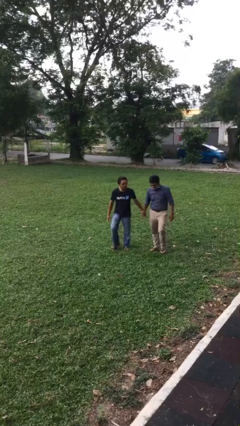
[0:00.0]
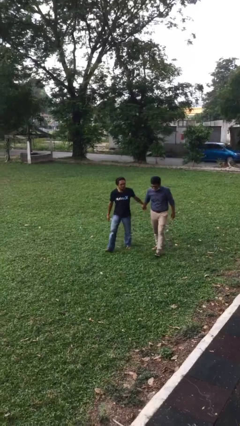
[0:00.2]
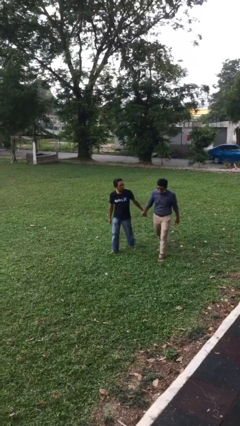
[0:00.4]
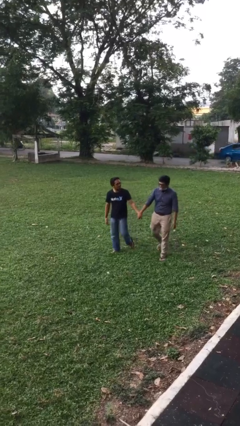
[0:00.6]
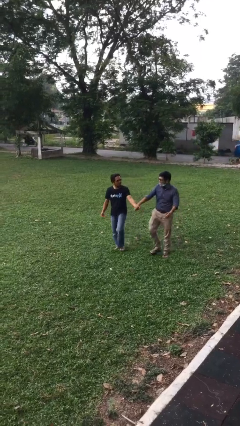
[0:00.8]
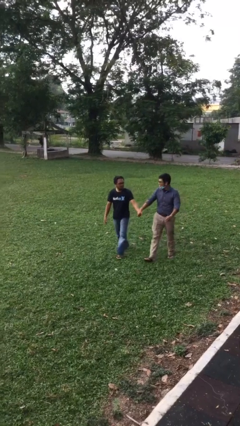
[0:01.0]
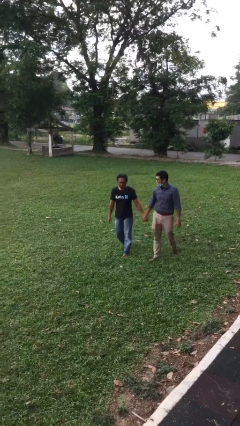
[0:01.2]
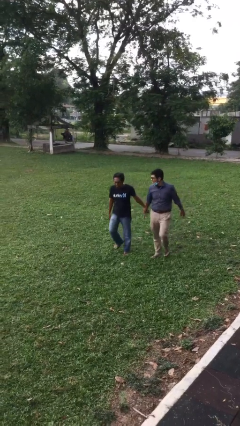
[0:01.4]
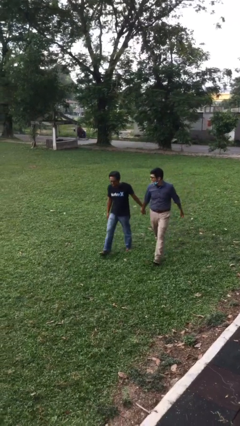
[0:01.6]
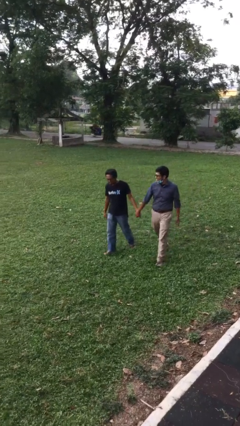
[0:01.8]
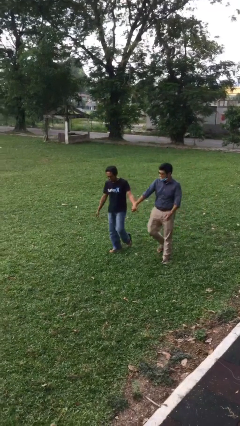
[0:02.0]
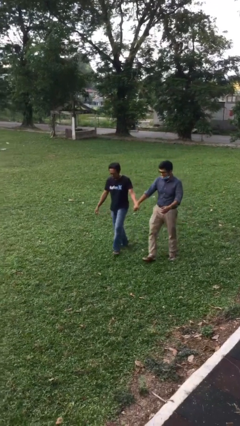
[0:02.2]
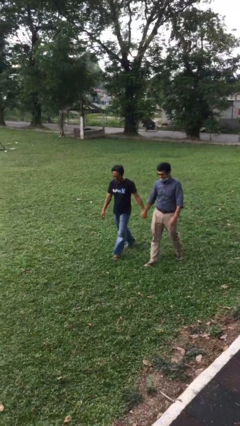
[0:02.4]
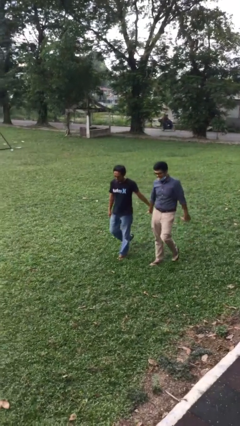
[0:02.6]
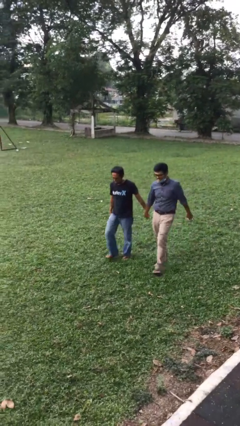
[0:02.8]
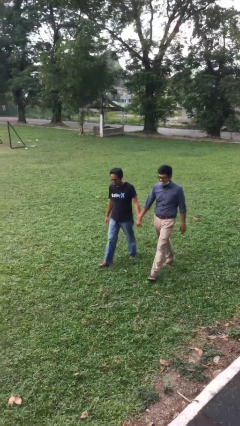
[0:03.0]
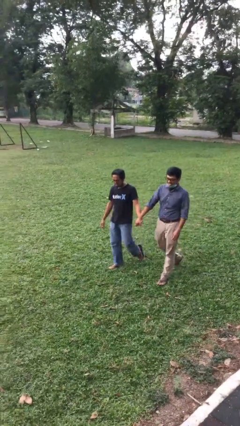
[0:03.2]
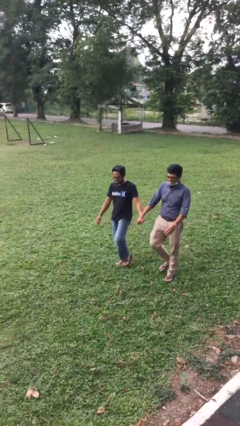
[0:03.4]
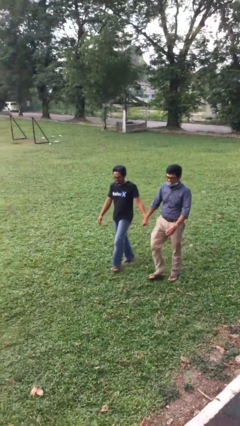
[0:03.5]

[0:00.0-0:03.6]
person holds hand

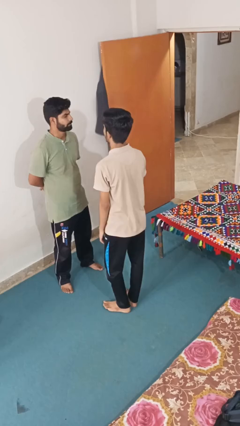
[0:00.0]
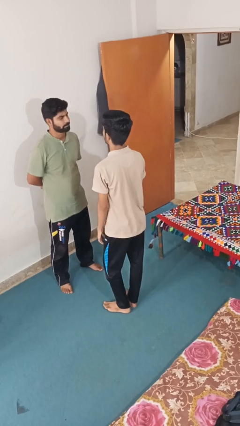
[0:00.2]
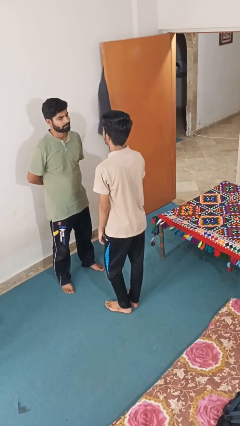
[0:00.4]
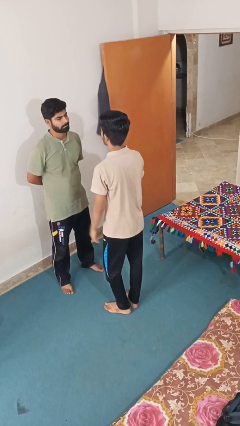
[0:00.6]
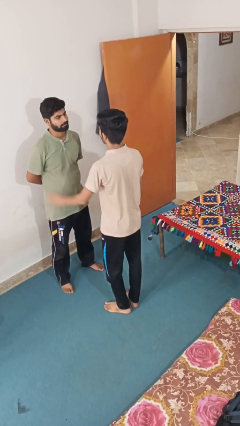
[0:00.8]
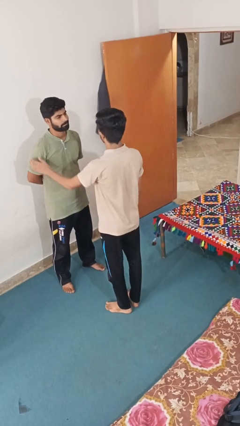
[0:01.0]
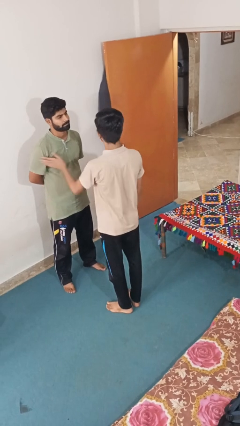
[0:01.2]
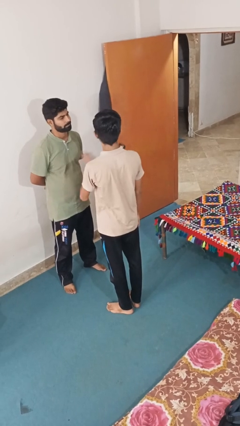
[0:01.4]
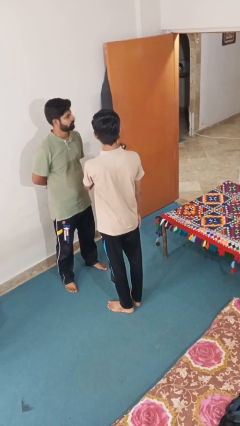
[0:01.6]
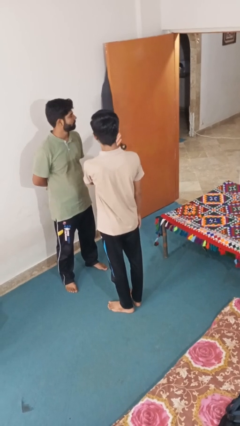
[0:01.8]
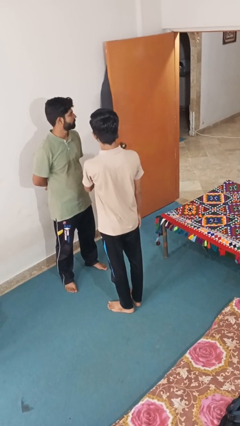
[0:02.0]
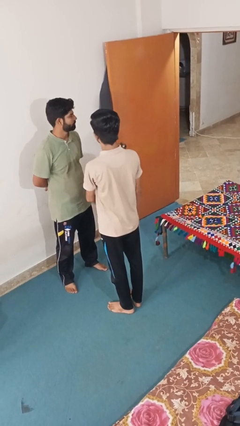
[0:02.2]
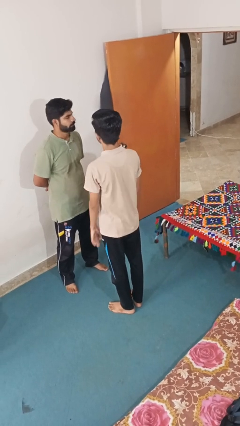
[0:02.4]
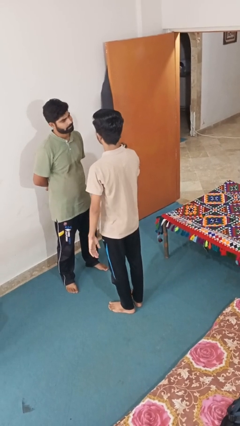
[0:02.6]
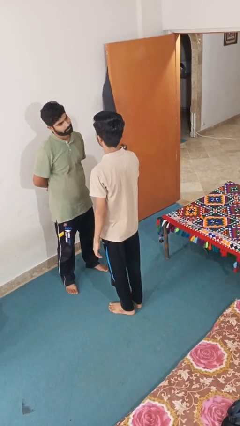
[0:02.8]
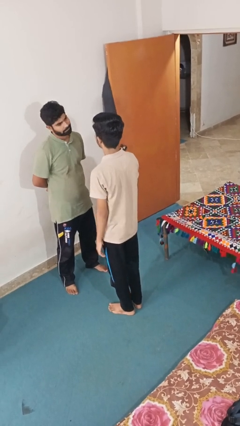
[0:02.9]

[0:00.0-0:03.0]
person shoves person

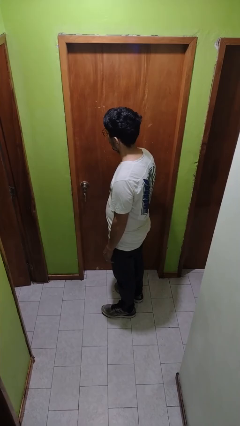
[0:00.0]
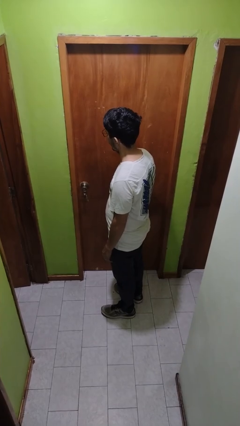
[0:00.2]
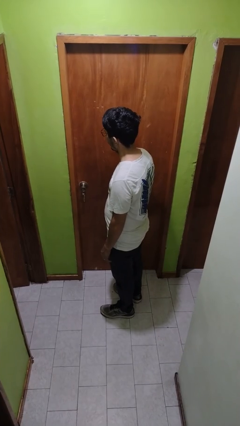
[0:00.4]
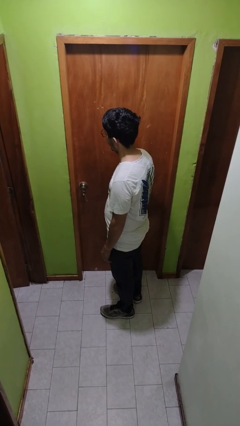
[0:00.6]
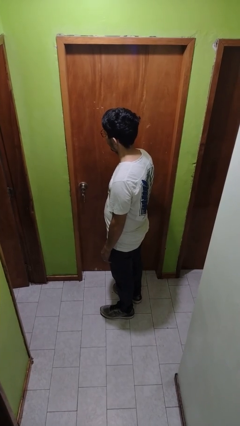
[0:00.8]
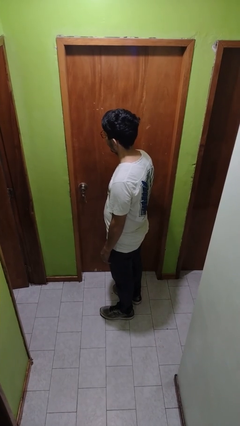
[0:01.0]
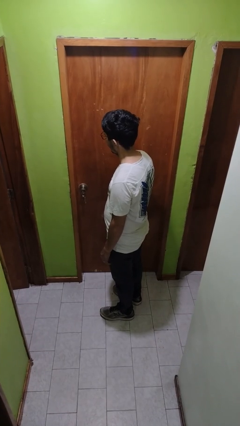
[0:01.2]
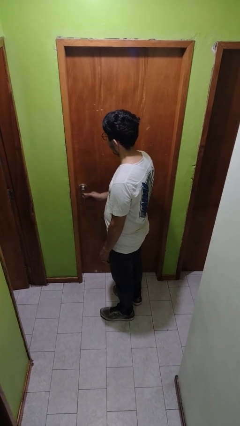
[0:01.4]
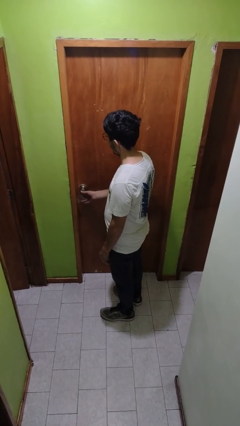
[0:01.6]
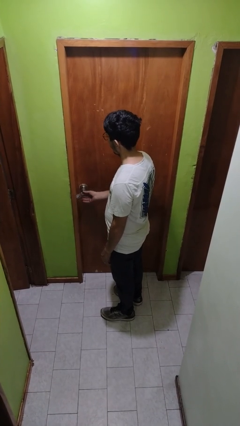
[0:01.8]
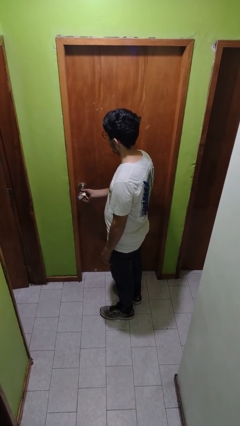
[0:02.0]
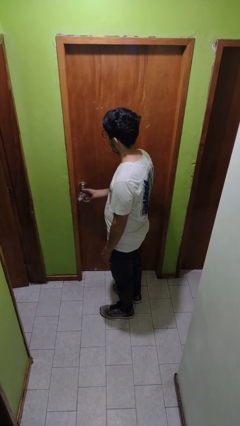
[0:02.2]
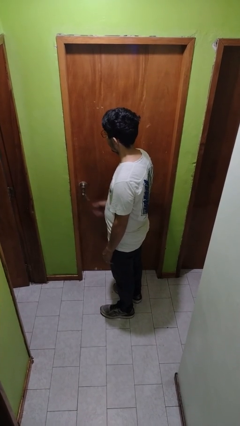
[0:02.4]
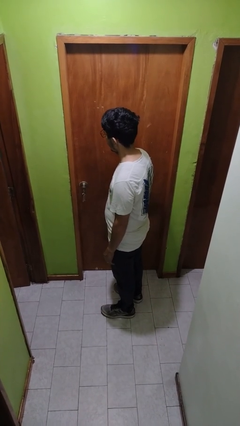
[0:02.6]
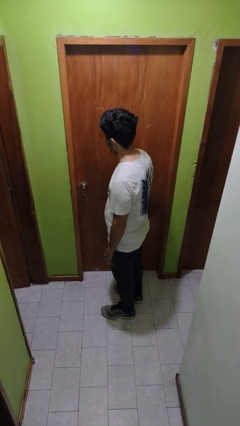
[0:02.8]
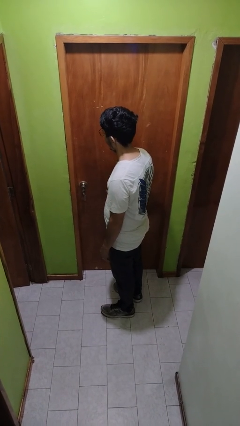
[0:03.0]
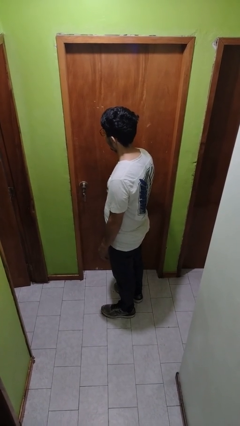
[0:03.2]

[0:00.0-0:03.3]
person unlocks door with keys

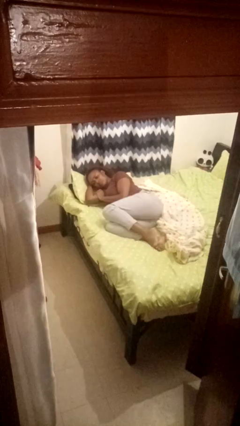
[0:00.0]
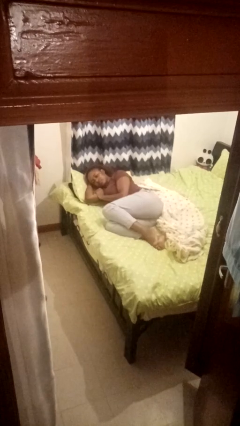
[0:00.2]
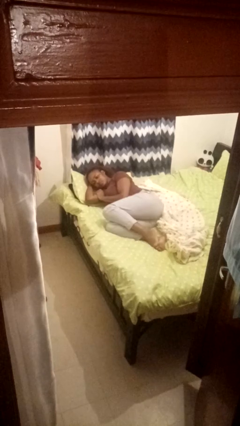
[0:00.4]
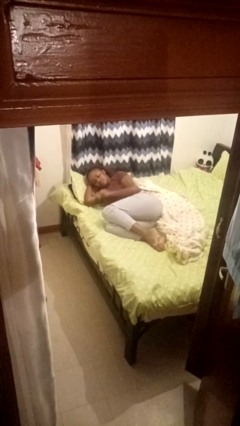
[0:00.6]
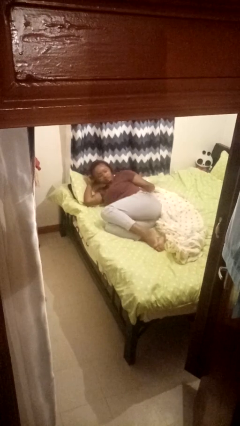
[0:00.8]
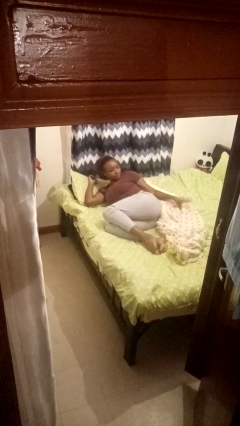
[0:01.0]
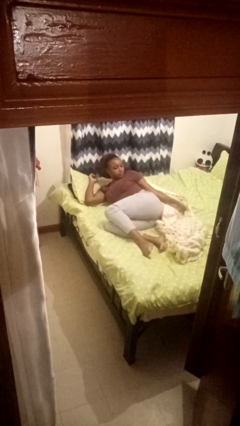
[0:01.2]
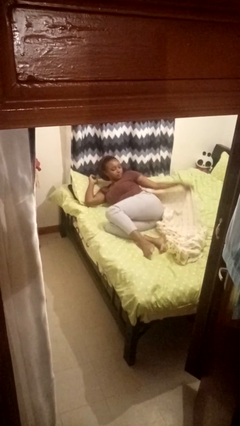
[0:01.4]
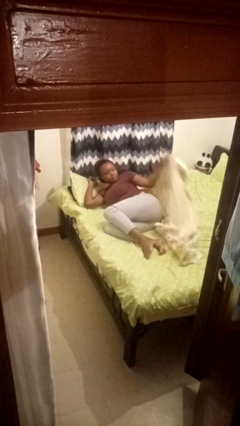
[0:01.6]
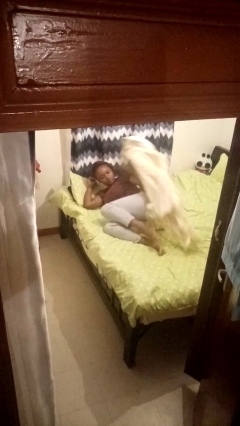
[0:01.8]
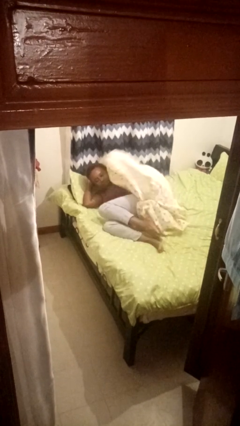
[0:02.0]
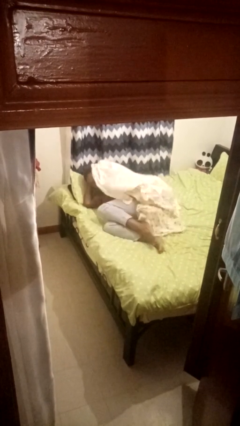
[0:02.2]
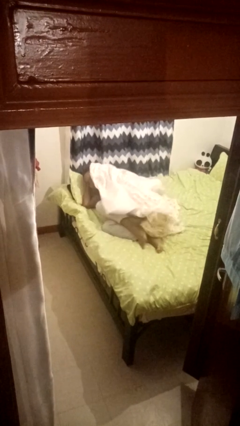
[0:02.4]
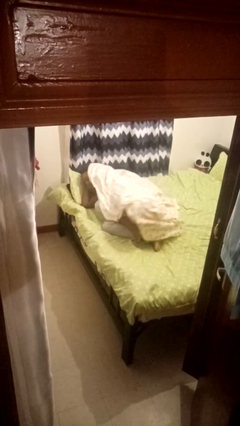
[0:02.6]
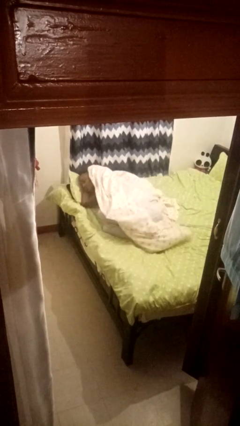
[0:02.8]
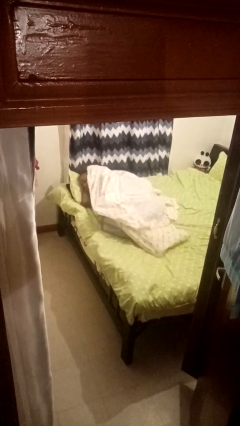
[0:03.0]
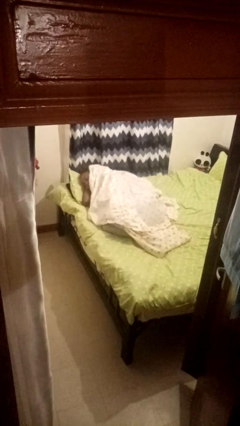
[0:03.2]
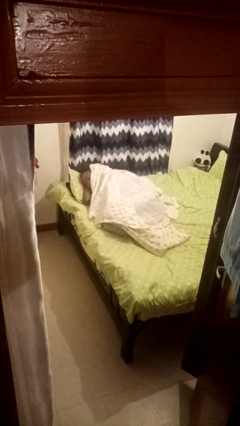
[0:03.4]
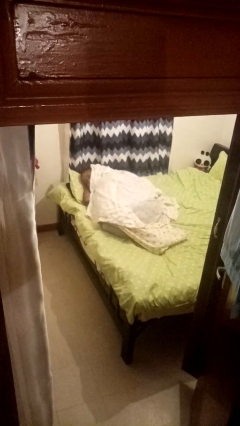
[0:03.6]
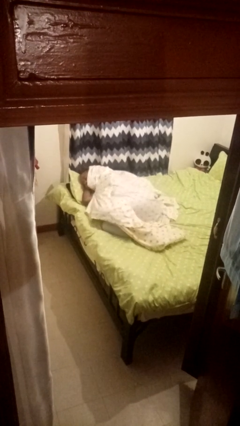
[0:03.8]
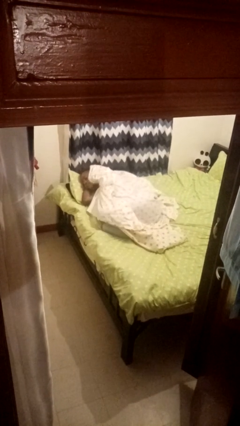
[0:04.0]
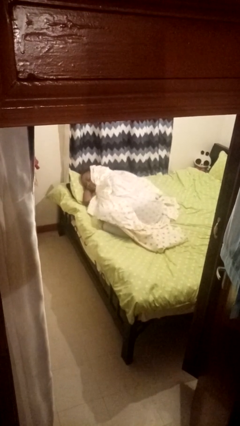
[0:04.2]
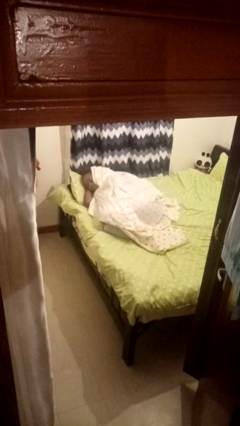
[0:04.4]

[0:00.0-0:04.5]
person covers with bedsheets

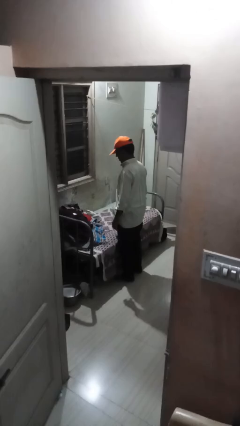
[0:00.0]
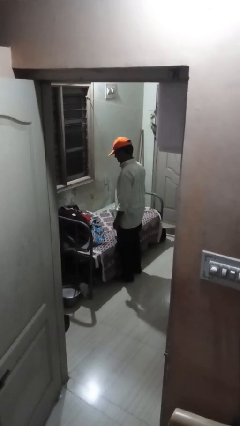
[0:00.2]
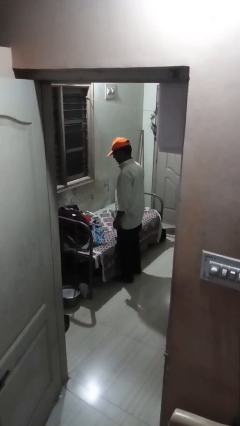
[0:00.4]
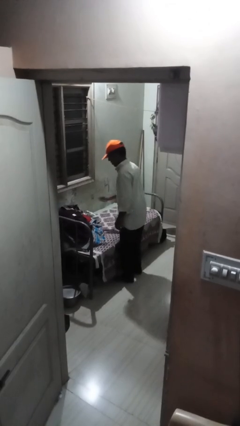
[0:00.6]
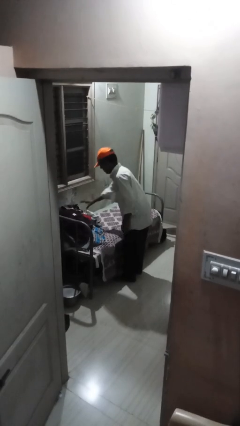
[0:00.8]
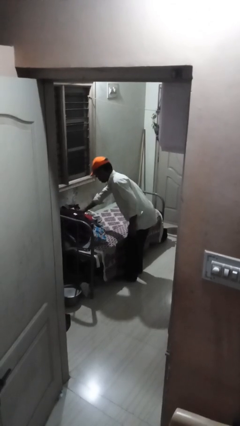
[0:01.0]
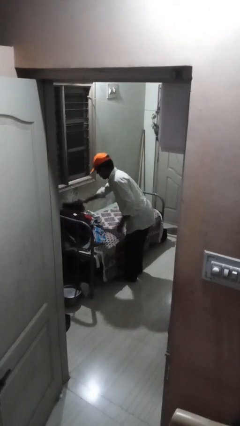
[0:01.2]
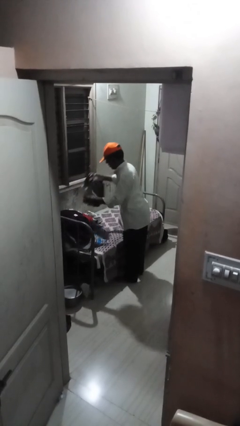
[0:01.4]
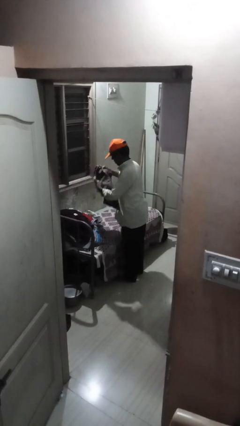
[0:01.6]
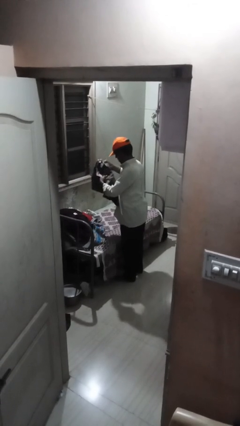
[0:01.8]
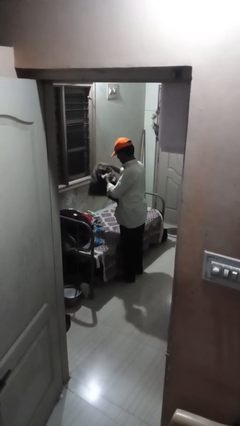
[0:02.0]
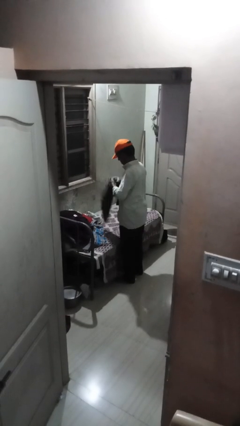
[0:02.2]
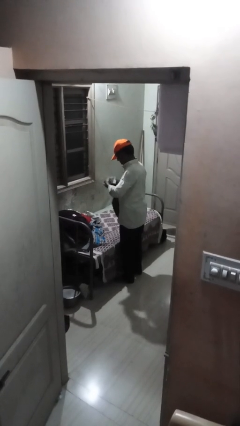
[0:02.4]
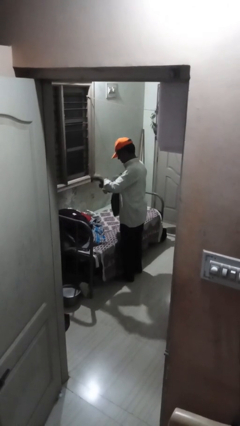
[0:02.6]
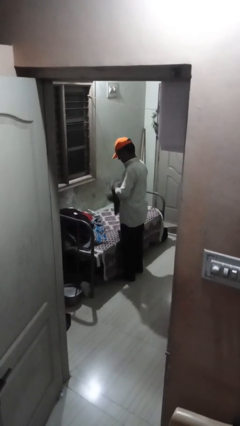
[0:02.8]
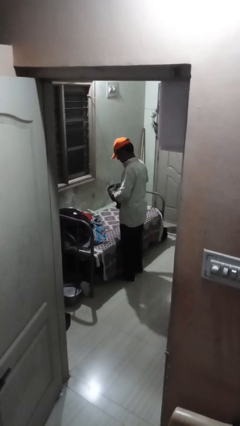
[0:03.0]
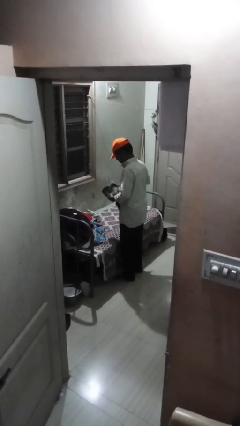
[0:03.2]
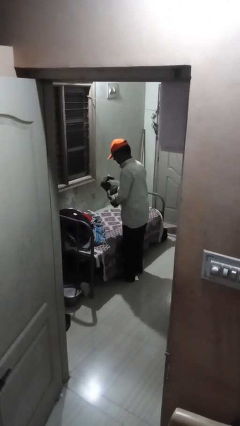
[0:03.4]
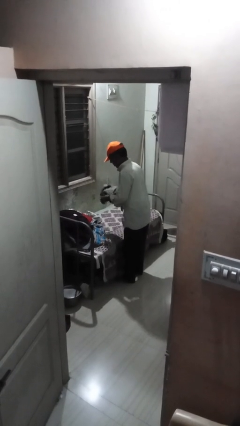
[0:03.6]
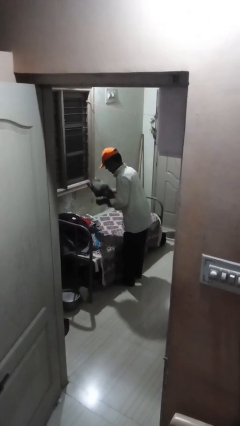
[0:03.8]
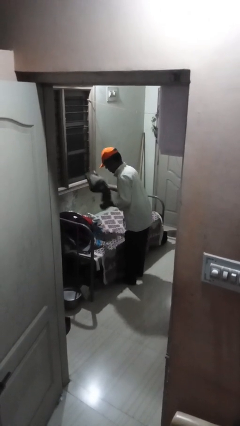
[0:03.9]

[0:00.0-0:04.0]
person folds pants
